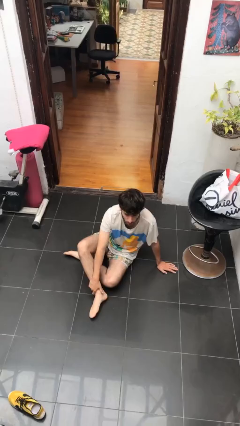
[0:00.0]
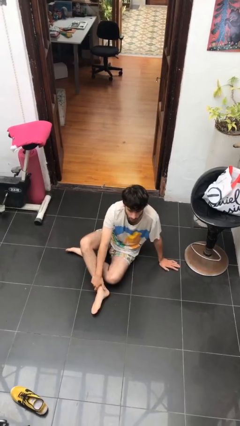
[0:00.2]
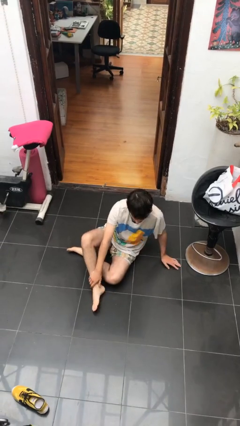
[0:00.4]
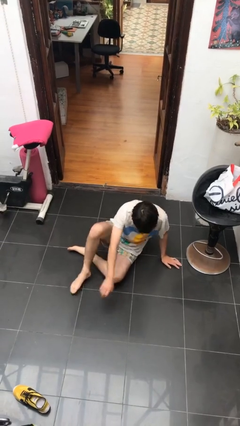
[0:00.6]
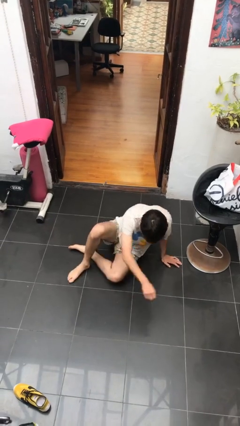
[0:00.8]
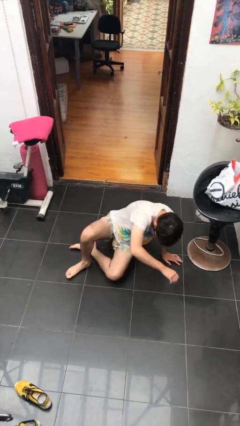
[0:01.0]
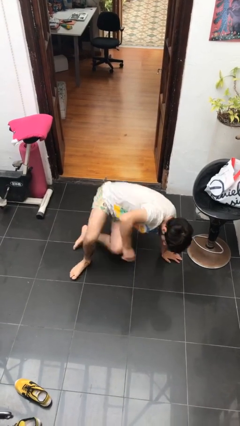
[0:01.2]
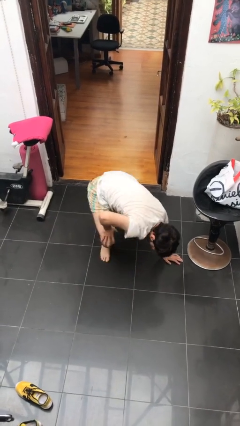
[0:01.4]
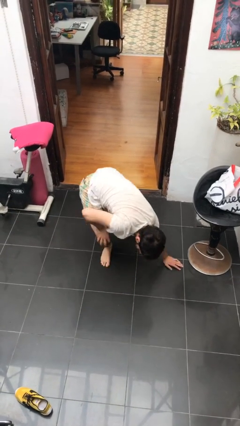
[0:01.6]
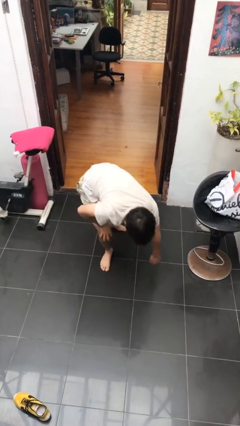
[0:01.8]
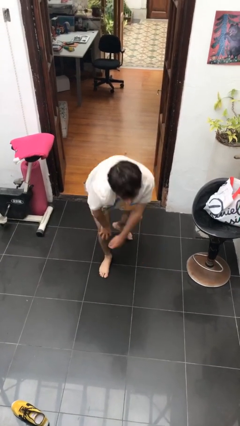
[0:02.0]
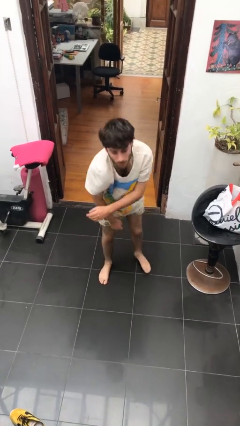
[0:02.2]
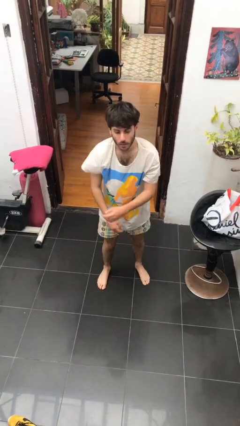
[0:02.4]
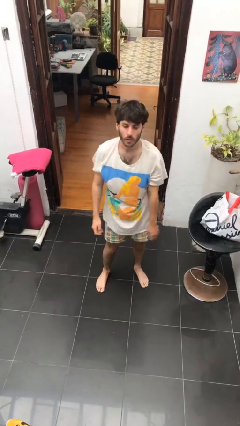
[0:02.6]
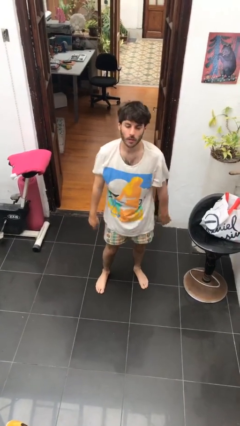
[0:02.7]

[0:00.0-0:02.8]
person stands up

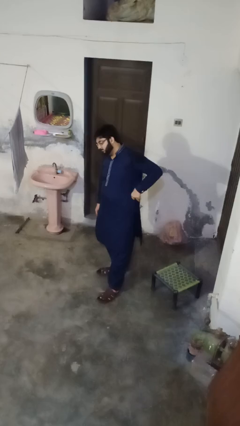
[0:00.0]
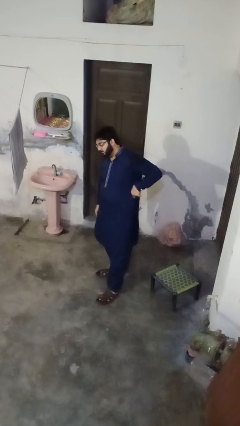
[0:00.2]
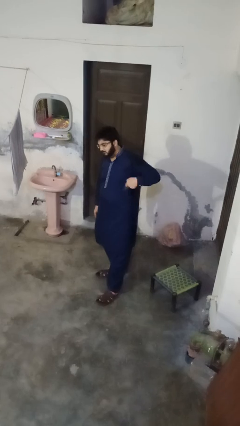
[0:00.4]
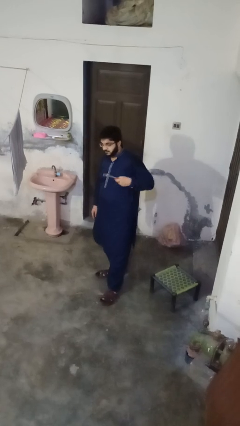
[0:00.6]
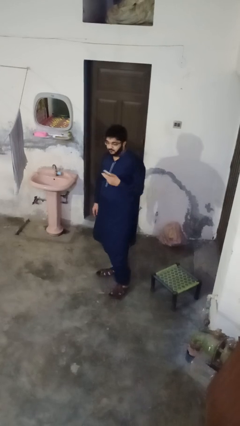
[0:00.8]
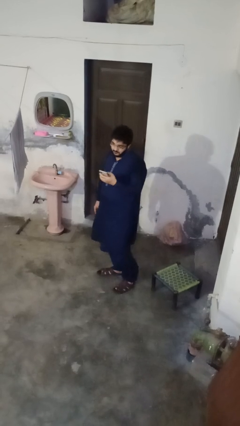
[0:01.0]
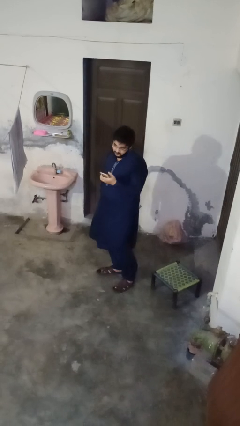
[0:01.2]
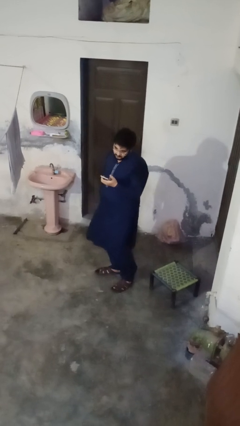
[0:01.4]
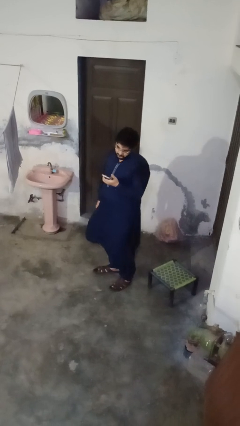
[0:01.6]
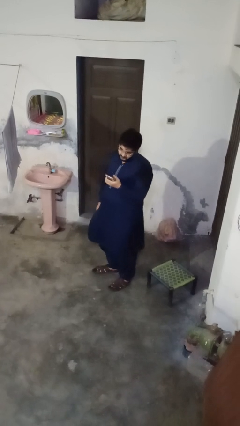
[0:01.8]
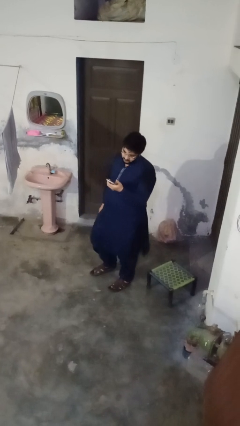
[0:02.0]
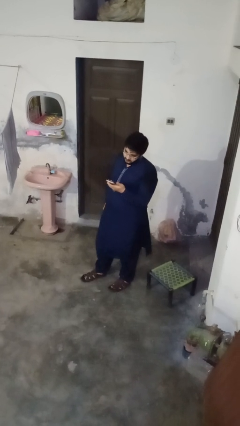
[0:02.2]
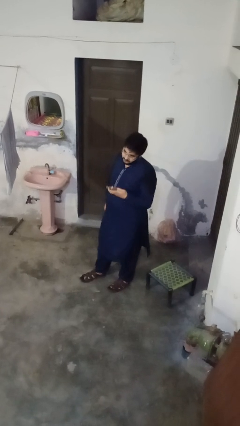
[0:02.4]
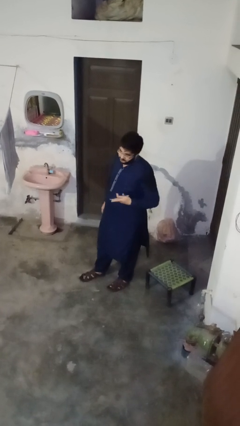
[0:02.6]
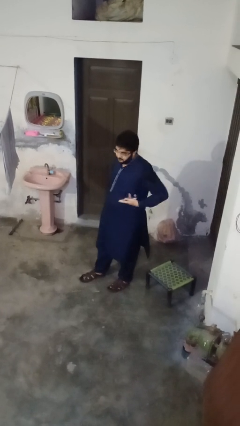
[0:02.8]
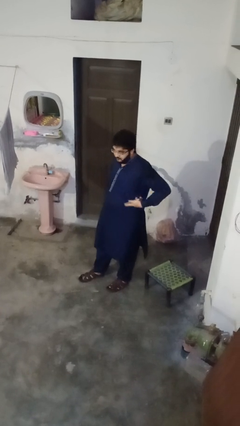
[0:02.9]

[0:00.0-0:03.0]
person takes phone from pocket

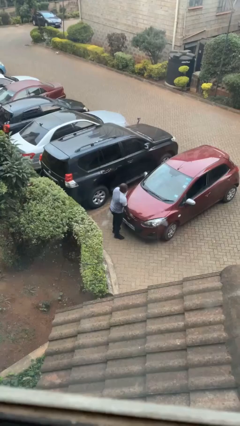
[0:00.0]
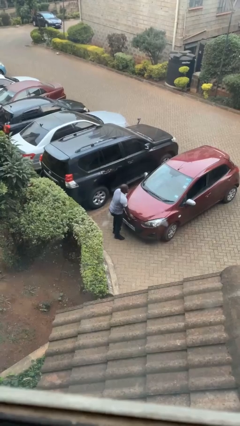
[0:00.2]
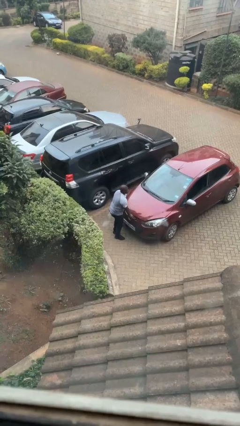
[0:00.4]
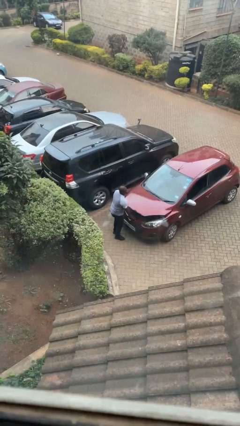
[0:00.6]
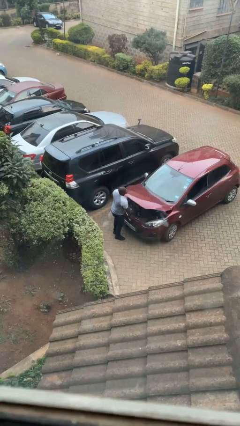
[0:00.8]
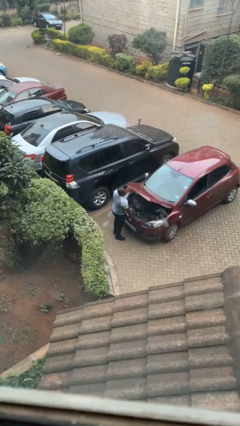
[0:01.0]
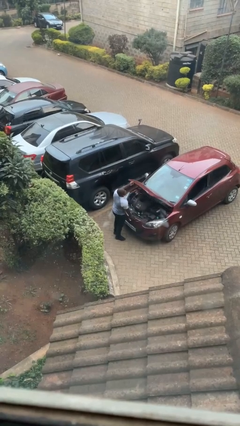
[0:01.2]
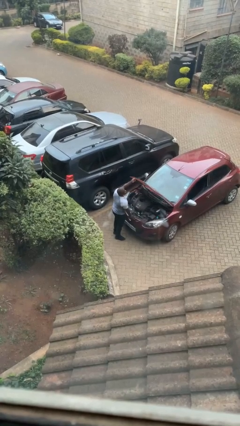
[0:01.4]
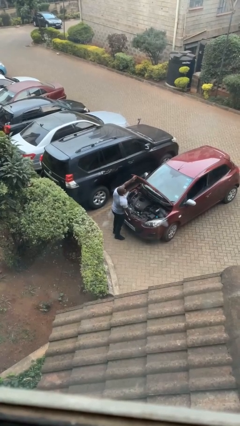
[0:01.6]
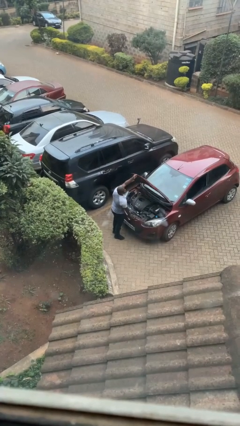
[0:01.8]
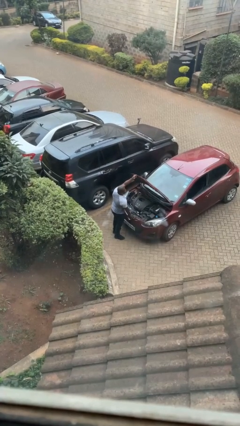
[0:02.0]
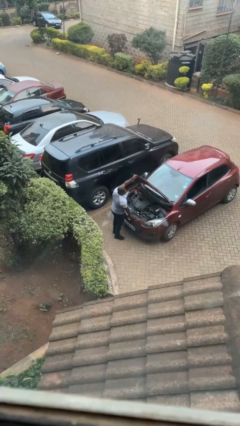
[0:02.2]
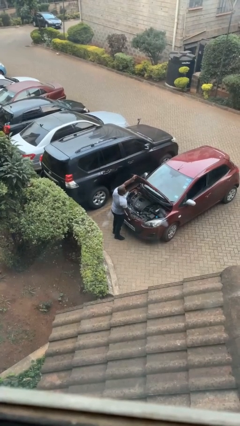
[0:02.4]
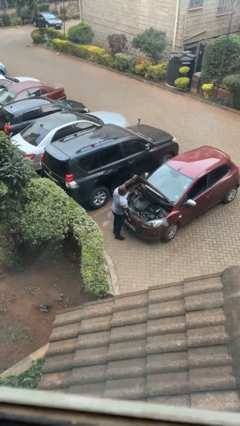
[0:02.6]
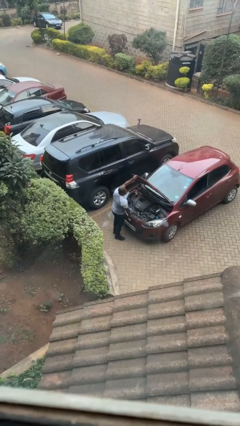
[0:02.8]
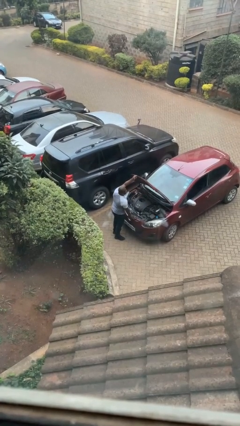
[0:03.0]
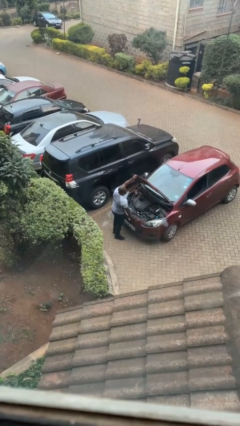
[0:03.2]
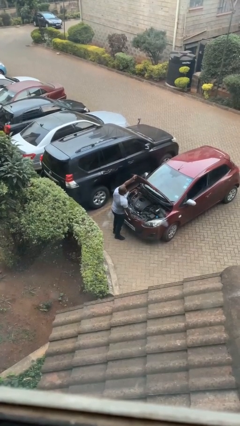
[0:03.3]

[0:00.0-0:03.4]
person opens car hood

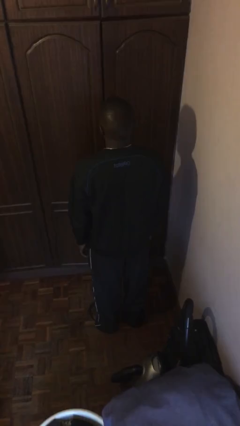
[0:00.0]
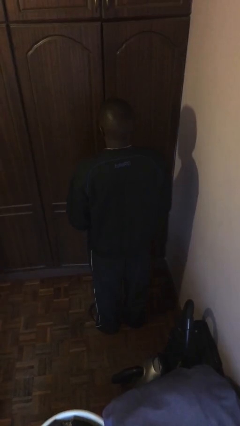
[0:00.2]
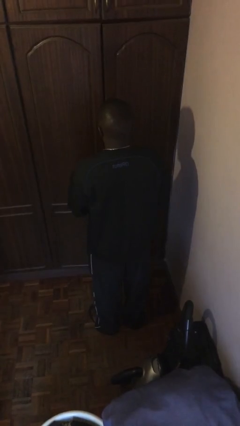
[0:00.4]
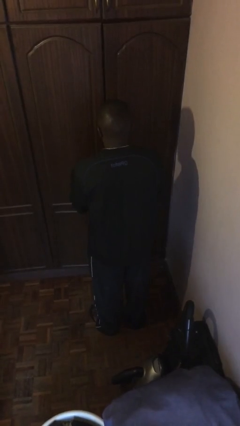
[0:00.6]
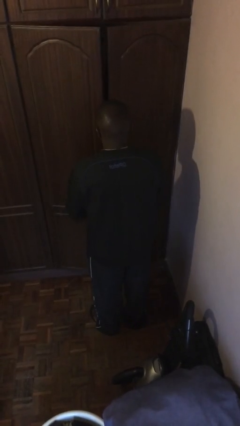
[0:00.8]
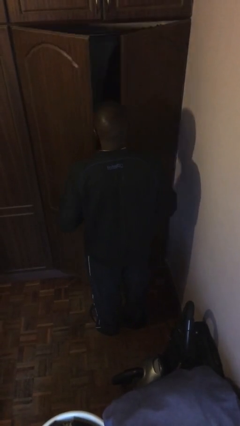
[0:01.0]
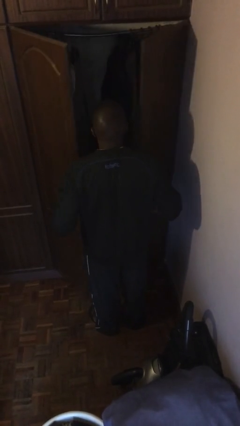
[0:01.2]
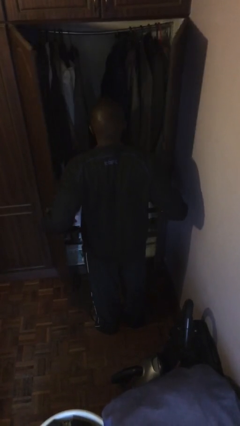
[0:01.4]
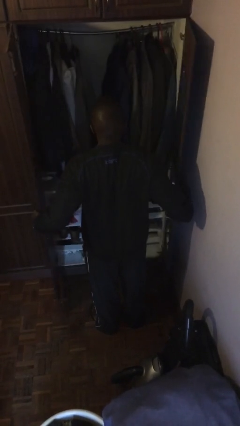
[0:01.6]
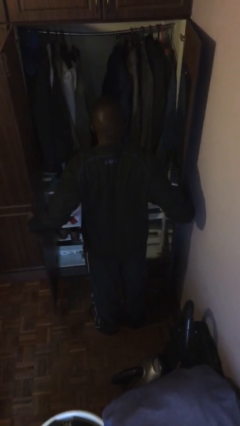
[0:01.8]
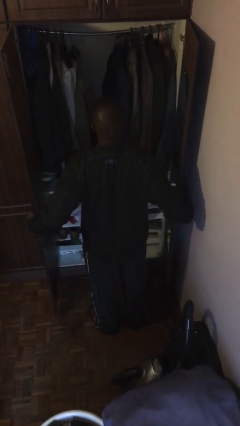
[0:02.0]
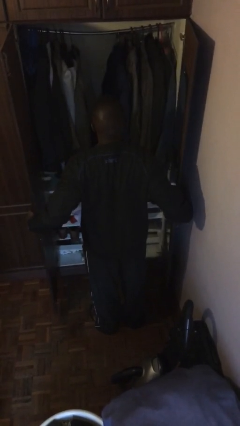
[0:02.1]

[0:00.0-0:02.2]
person opens closet door

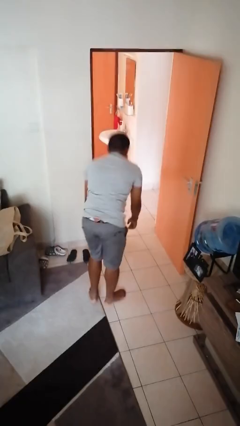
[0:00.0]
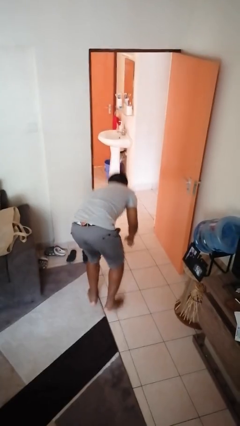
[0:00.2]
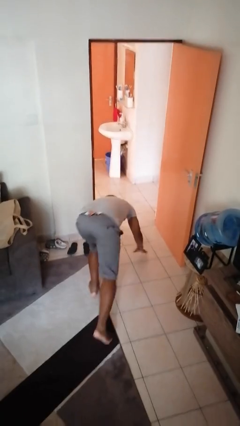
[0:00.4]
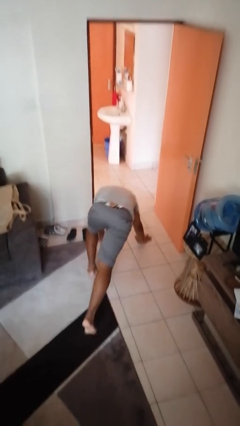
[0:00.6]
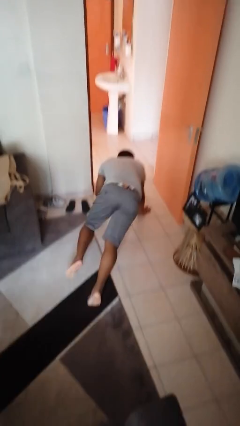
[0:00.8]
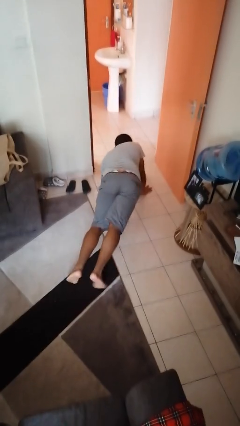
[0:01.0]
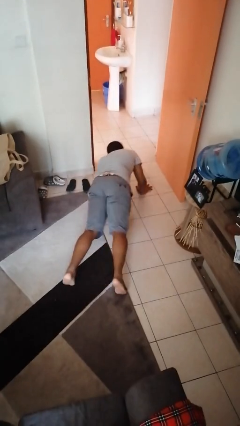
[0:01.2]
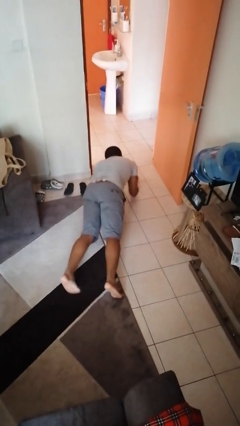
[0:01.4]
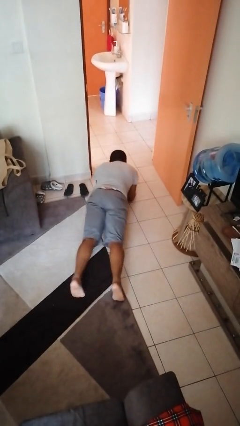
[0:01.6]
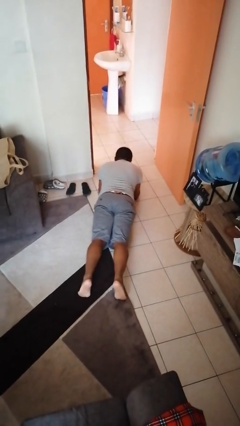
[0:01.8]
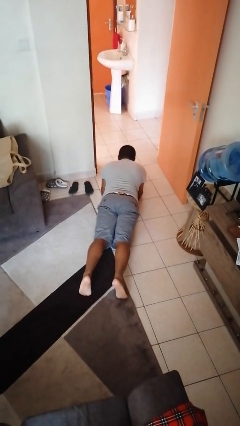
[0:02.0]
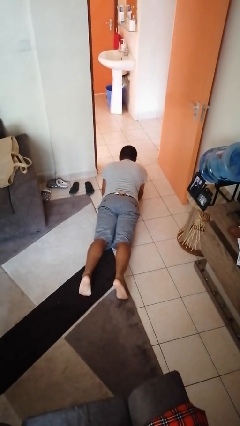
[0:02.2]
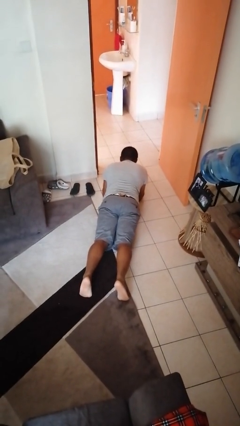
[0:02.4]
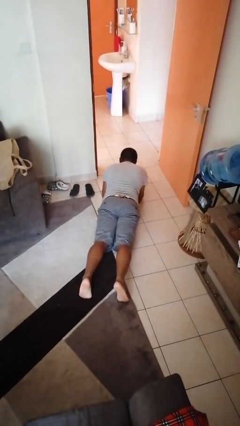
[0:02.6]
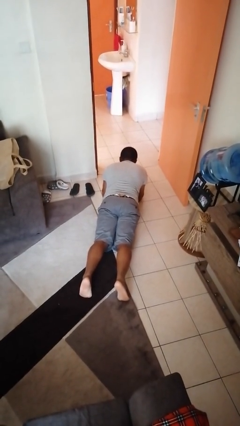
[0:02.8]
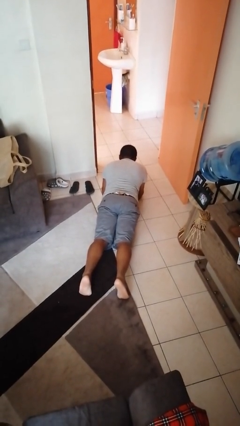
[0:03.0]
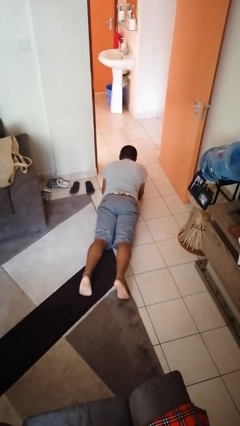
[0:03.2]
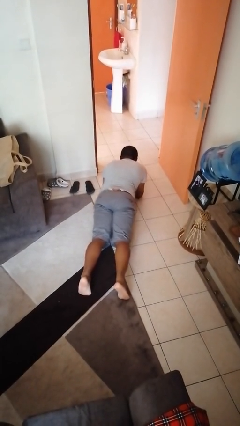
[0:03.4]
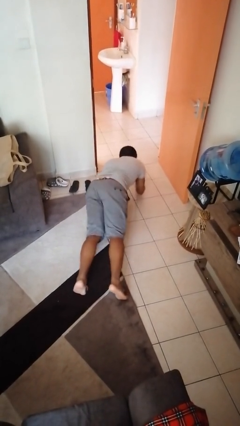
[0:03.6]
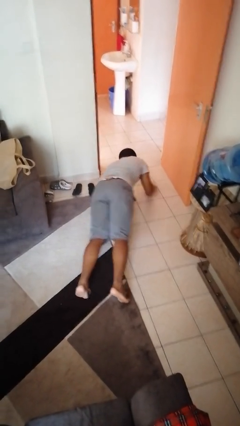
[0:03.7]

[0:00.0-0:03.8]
person exercises with plank

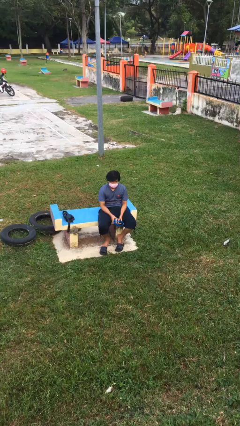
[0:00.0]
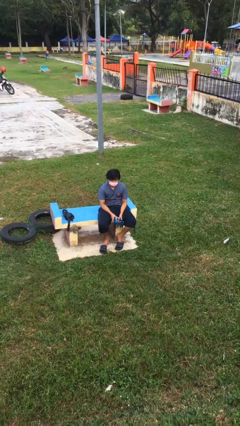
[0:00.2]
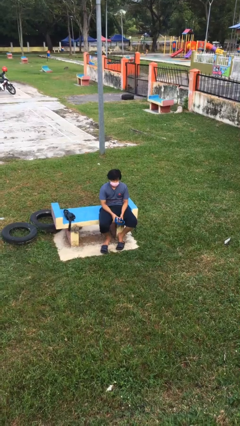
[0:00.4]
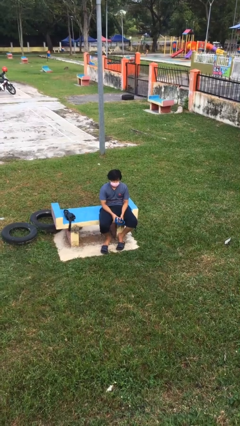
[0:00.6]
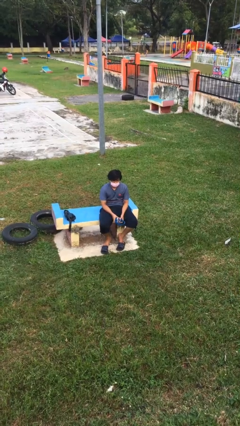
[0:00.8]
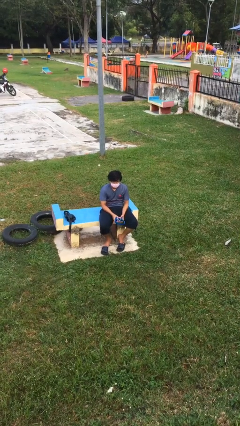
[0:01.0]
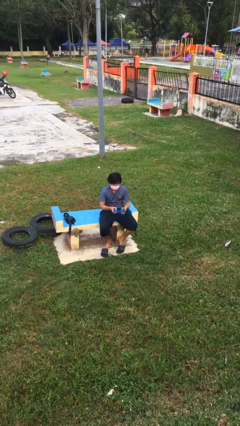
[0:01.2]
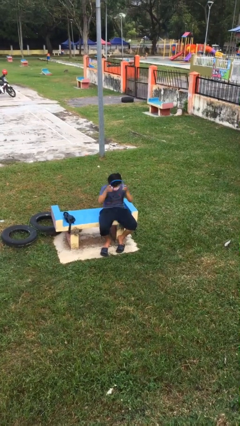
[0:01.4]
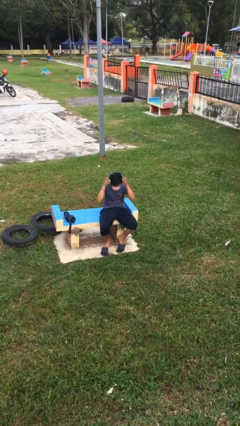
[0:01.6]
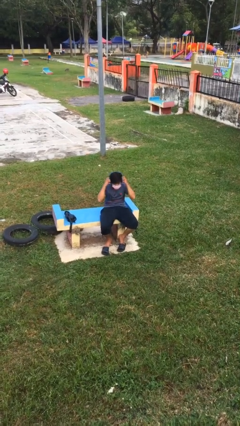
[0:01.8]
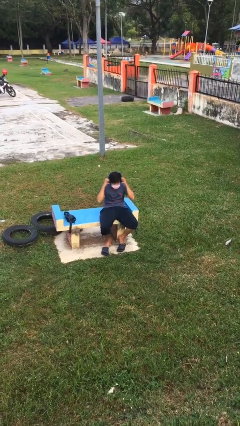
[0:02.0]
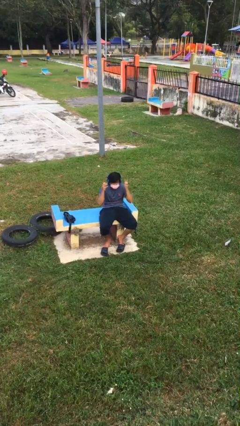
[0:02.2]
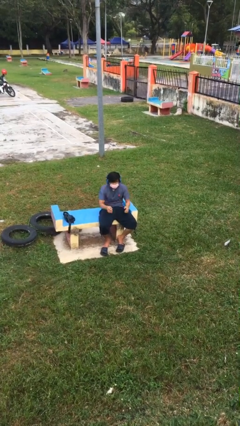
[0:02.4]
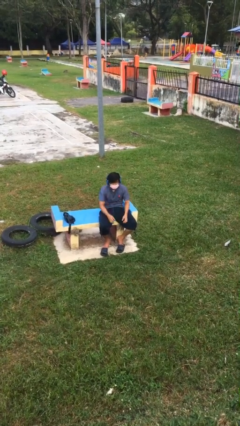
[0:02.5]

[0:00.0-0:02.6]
person puts on headphones
